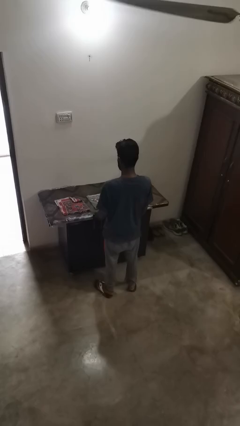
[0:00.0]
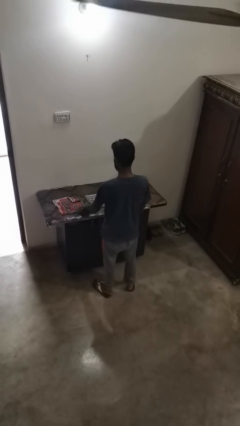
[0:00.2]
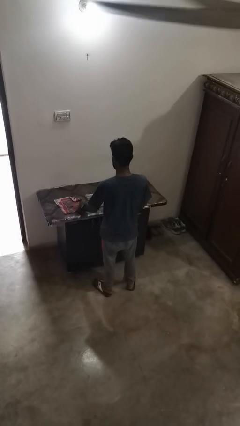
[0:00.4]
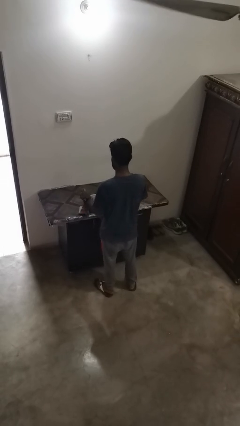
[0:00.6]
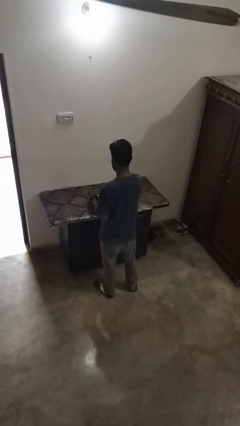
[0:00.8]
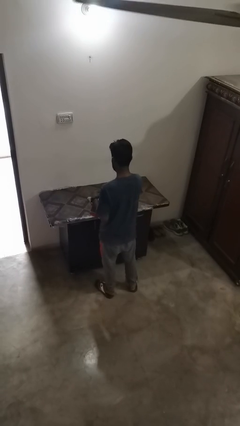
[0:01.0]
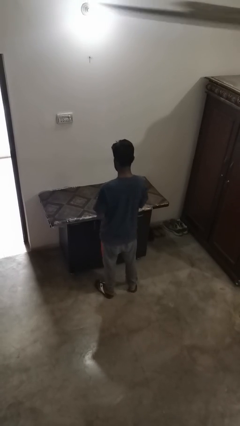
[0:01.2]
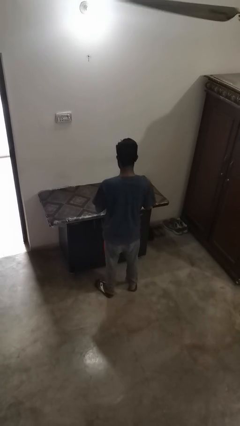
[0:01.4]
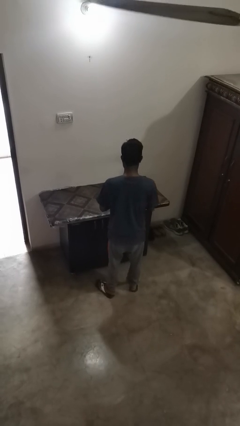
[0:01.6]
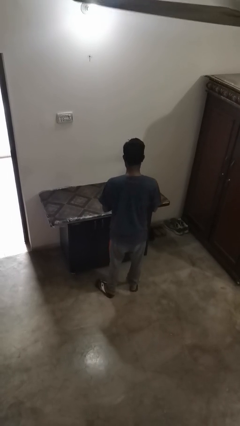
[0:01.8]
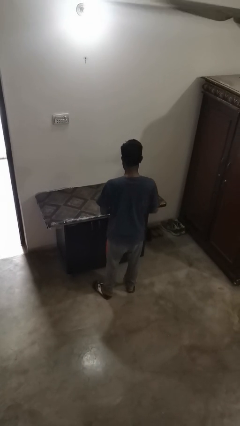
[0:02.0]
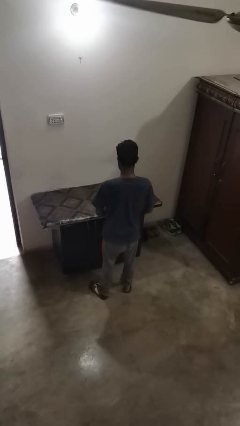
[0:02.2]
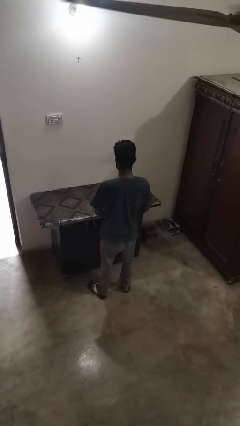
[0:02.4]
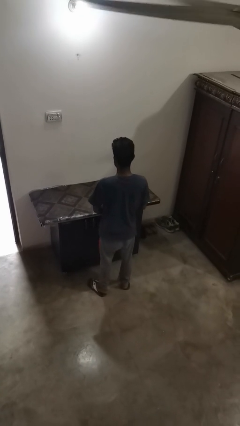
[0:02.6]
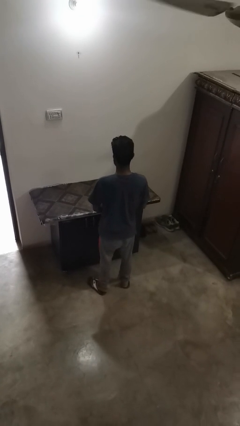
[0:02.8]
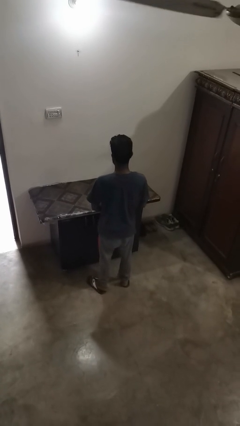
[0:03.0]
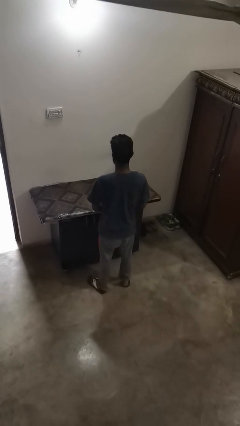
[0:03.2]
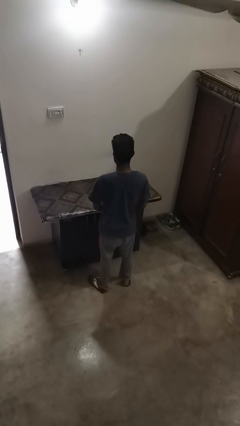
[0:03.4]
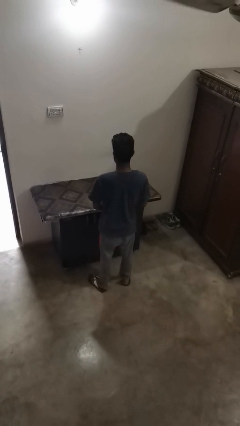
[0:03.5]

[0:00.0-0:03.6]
person folds tablecloth

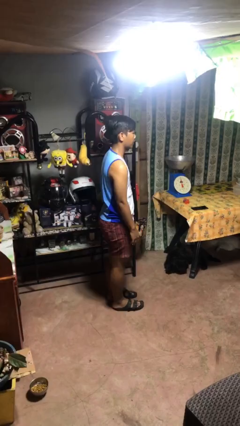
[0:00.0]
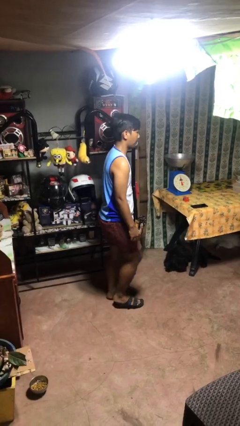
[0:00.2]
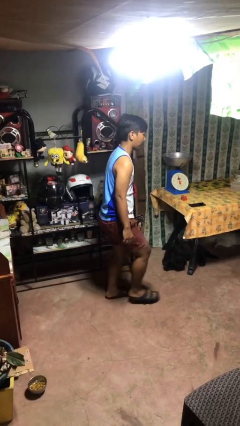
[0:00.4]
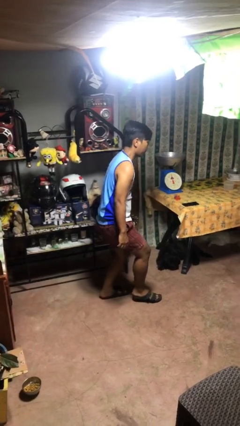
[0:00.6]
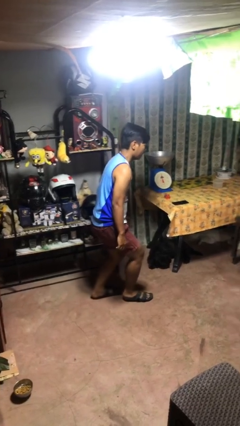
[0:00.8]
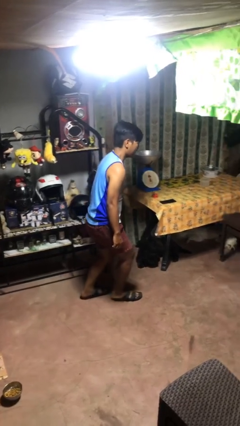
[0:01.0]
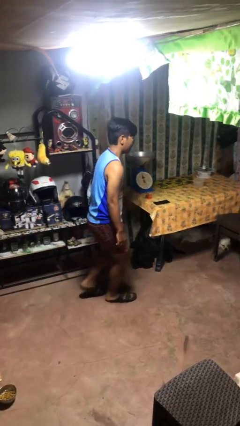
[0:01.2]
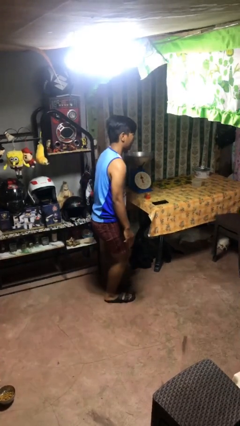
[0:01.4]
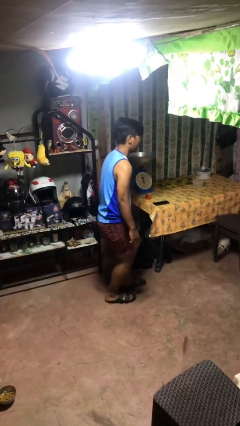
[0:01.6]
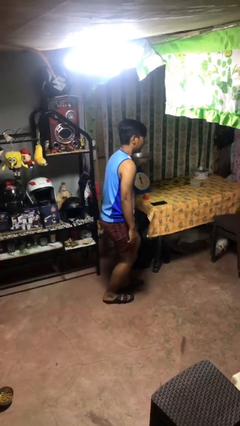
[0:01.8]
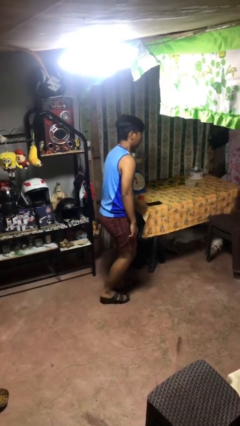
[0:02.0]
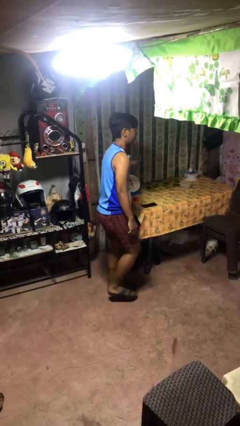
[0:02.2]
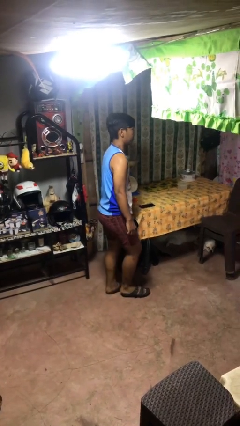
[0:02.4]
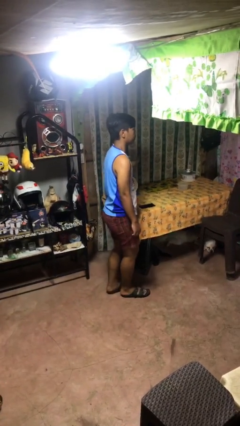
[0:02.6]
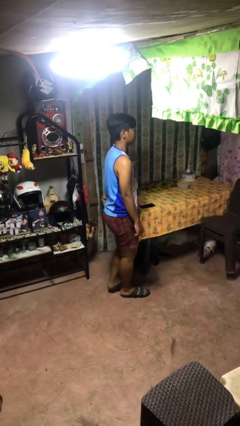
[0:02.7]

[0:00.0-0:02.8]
person walks tiptoe

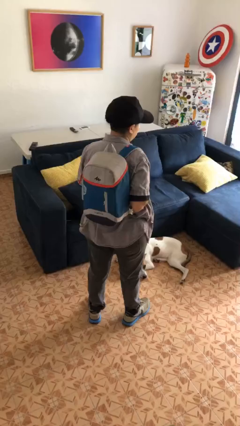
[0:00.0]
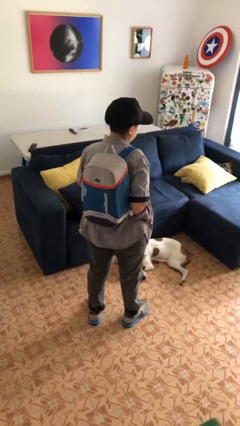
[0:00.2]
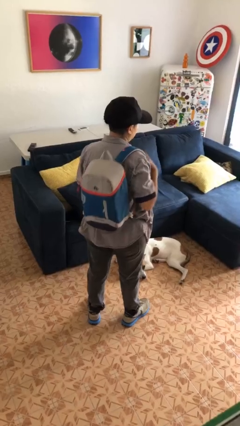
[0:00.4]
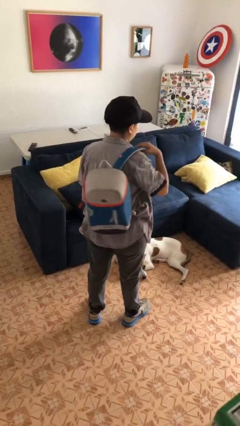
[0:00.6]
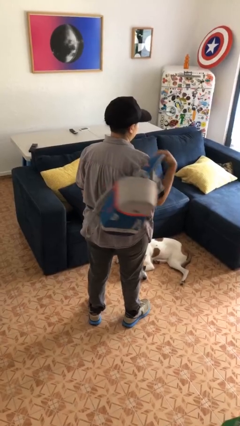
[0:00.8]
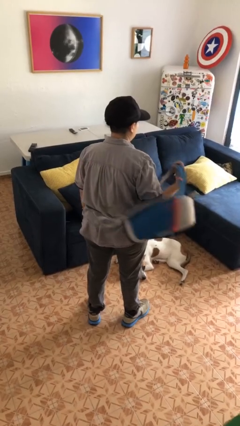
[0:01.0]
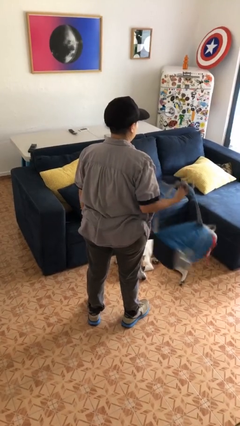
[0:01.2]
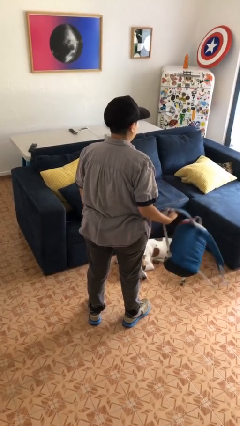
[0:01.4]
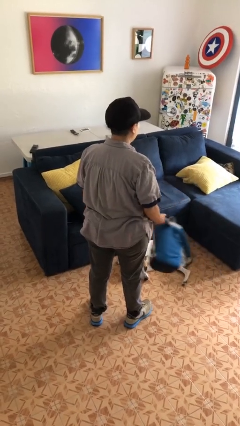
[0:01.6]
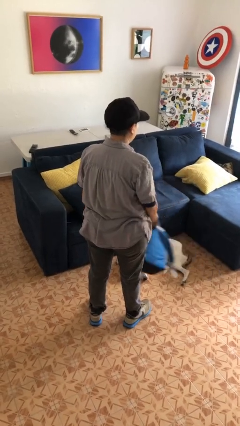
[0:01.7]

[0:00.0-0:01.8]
person takes off backpack

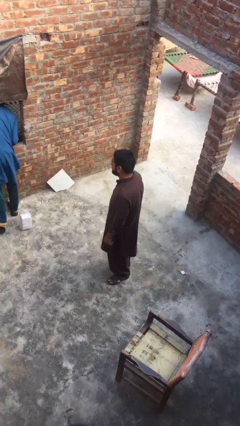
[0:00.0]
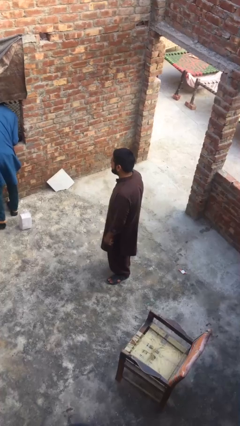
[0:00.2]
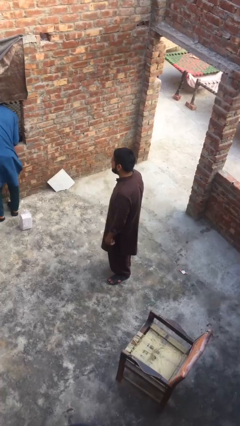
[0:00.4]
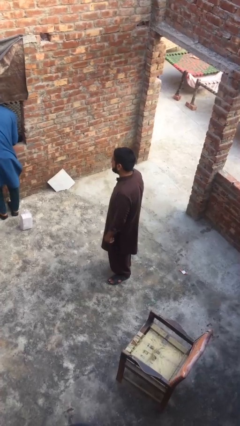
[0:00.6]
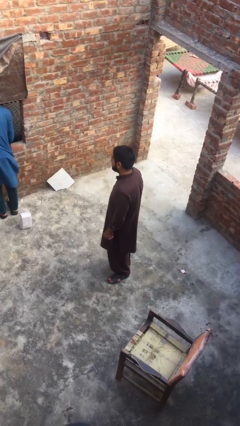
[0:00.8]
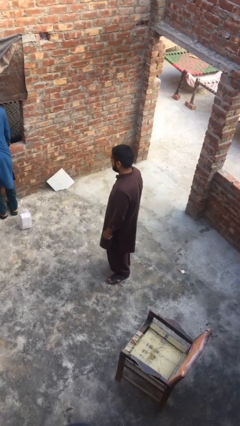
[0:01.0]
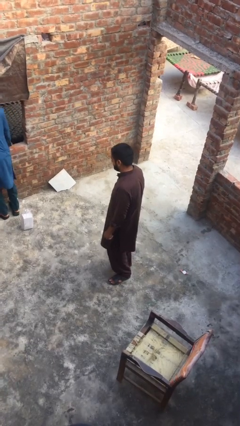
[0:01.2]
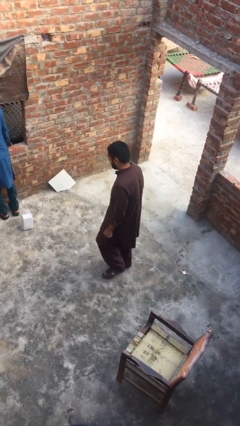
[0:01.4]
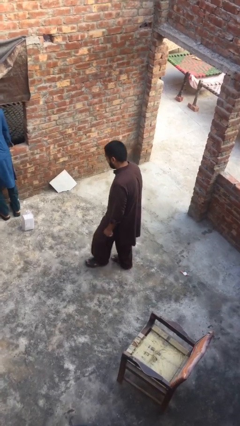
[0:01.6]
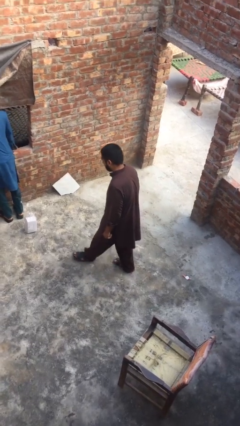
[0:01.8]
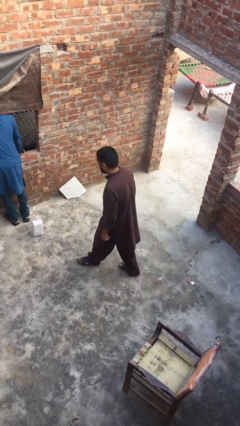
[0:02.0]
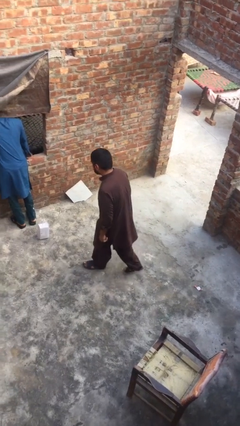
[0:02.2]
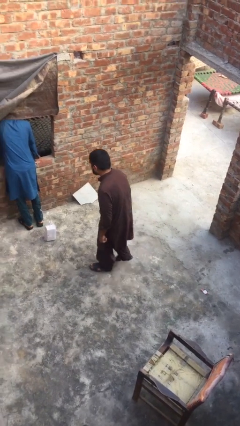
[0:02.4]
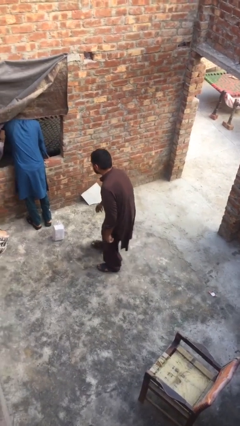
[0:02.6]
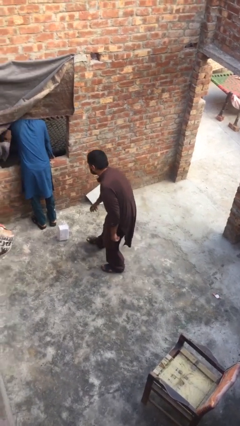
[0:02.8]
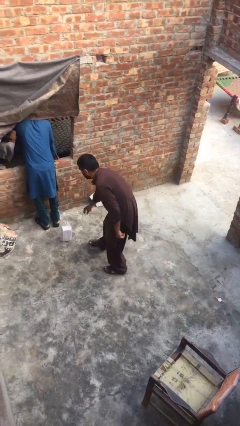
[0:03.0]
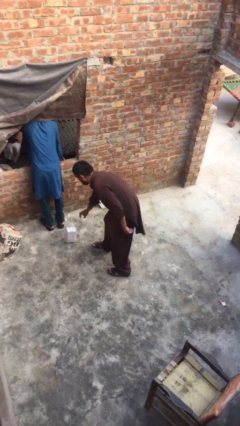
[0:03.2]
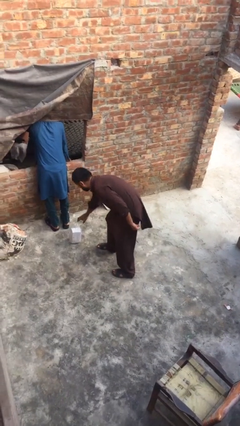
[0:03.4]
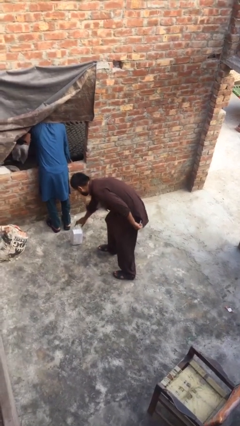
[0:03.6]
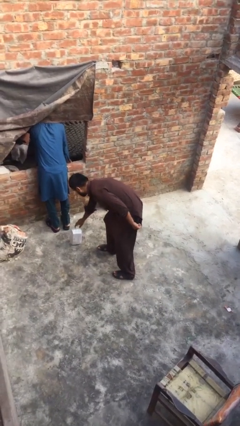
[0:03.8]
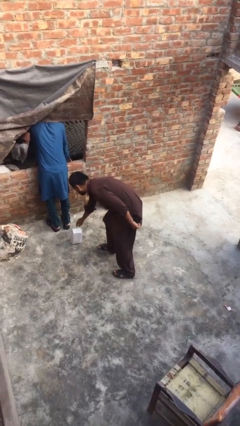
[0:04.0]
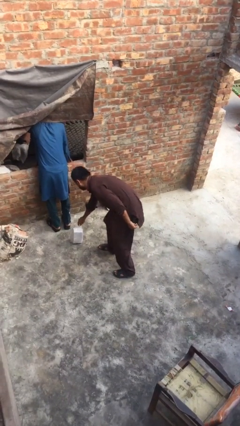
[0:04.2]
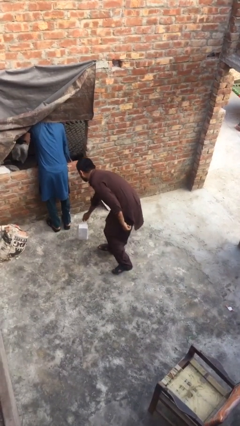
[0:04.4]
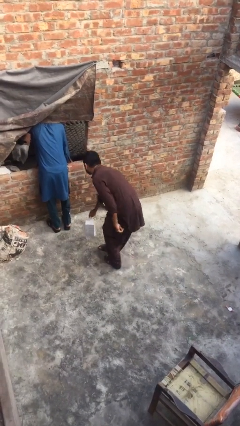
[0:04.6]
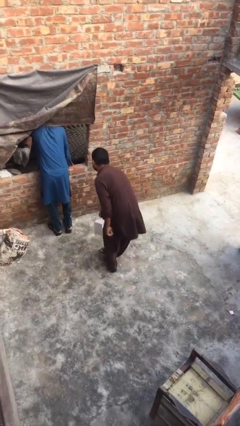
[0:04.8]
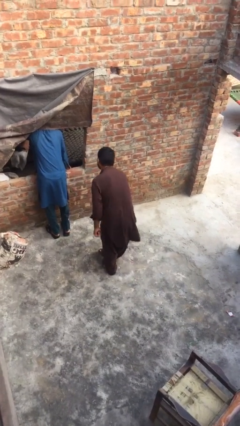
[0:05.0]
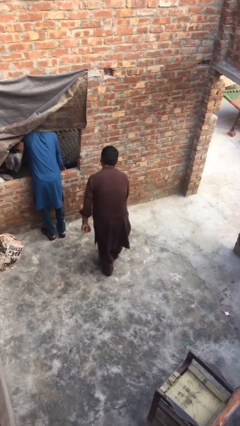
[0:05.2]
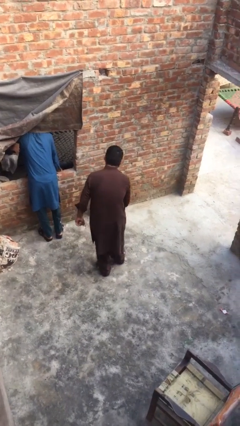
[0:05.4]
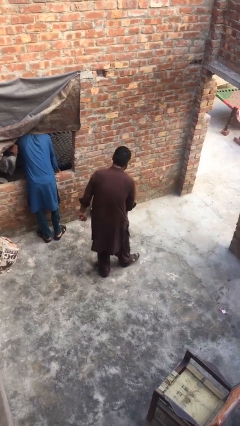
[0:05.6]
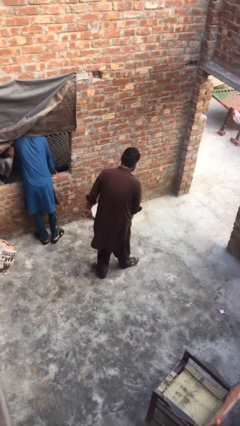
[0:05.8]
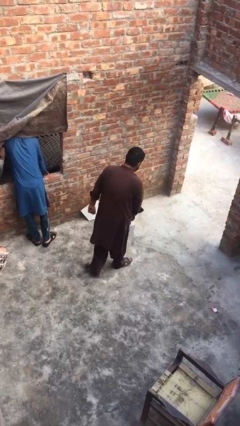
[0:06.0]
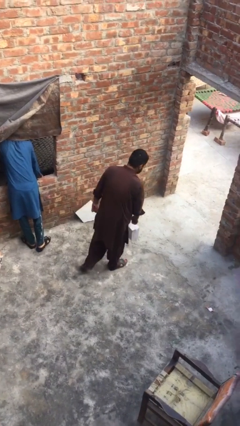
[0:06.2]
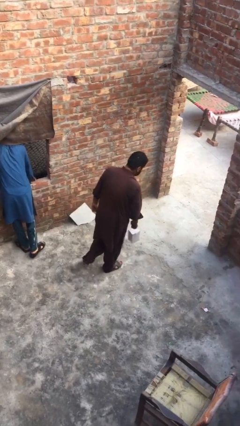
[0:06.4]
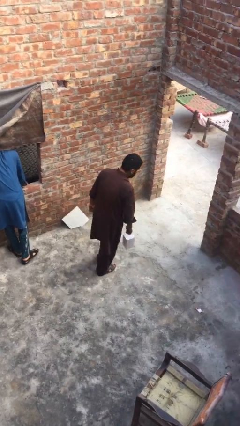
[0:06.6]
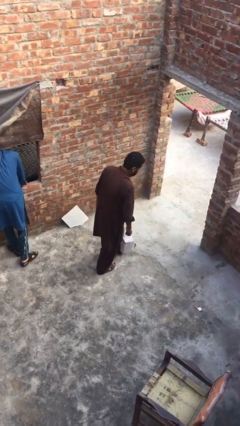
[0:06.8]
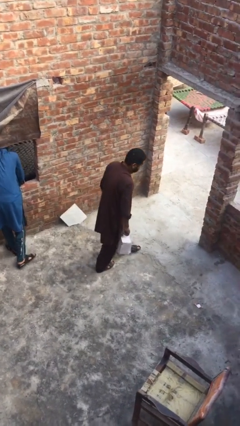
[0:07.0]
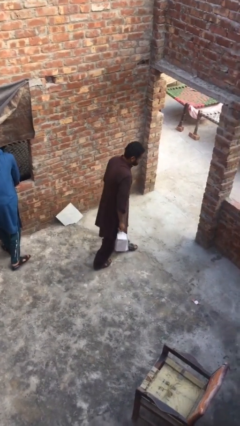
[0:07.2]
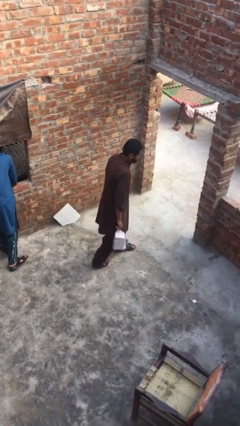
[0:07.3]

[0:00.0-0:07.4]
person steals object from person

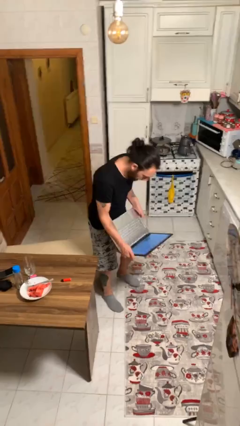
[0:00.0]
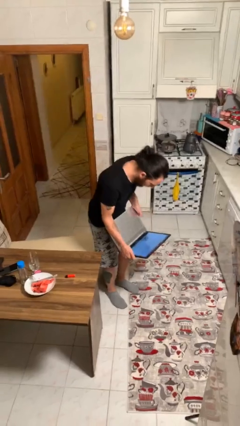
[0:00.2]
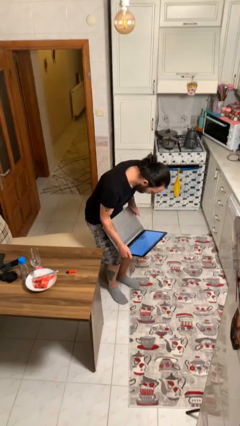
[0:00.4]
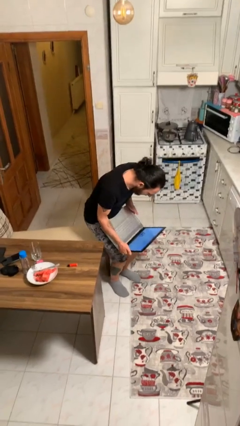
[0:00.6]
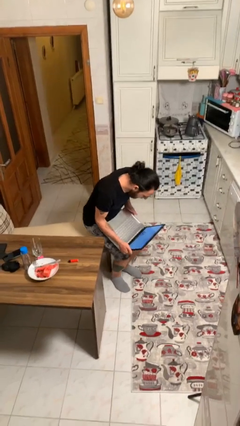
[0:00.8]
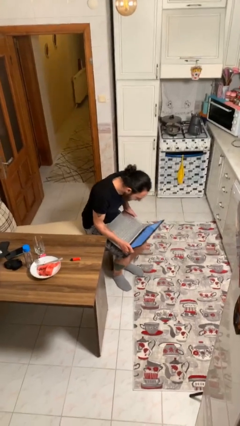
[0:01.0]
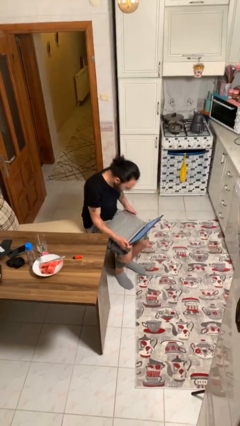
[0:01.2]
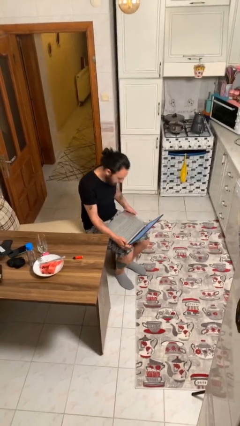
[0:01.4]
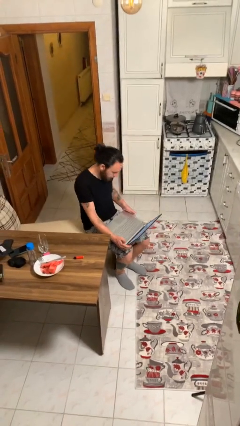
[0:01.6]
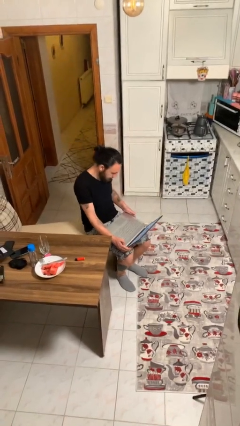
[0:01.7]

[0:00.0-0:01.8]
person sits down

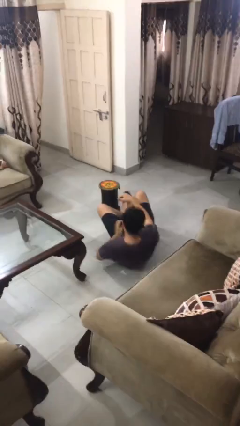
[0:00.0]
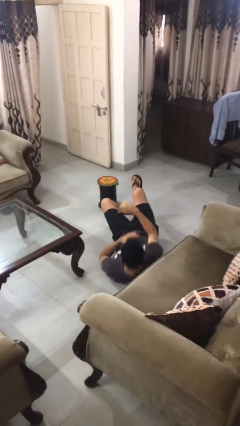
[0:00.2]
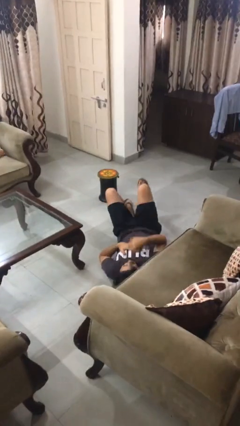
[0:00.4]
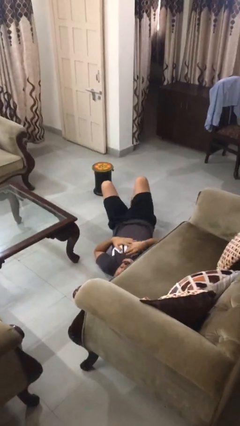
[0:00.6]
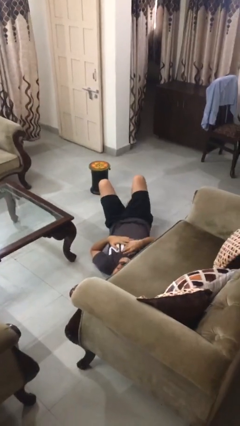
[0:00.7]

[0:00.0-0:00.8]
person lies down on floor
